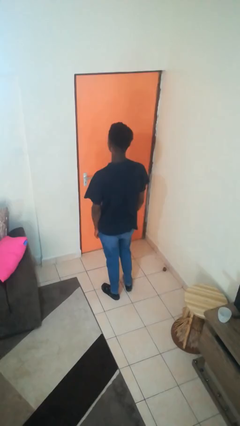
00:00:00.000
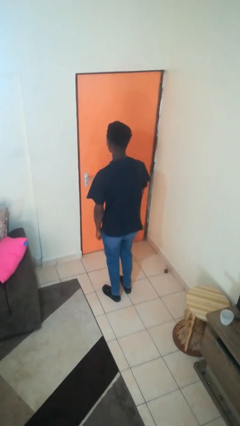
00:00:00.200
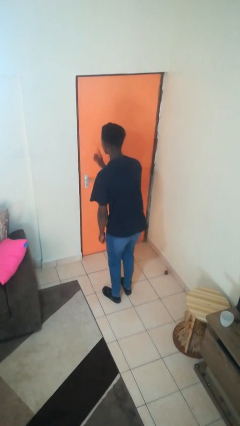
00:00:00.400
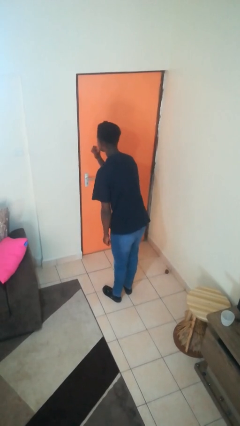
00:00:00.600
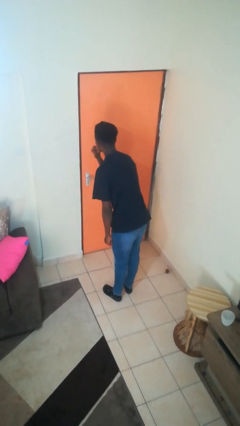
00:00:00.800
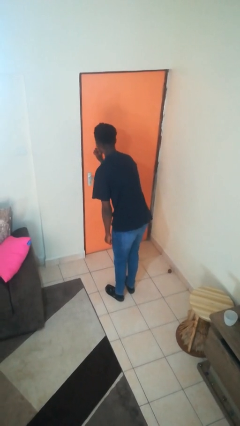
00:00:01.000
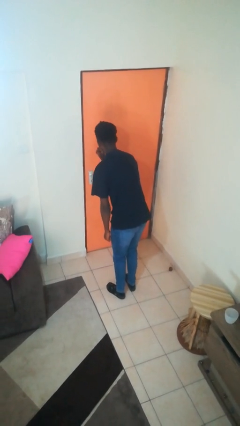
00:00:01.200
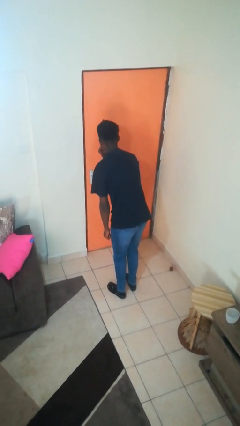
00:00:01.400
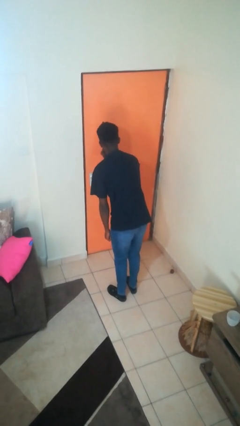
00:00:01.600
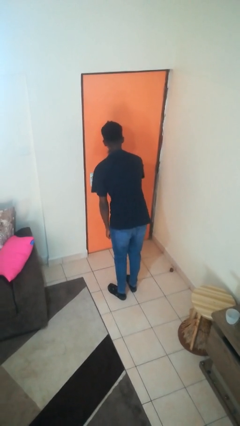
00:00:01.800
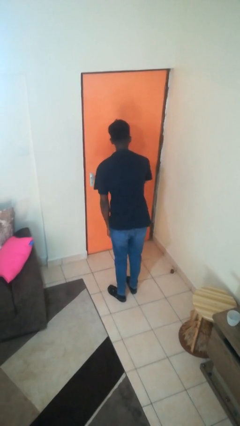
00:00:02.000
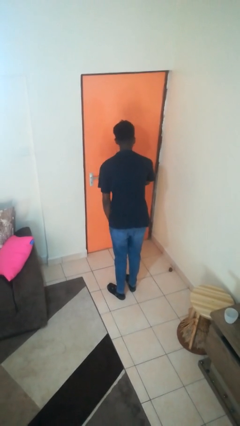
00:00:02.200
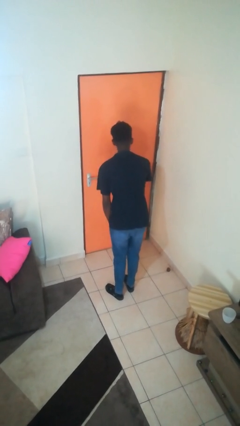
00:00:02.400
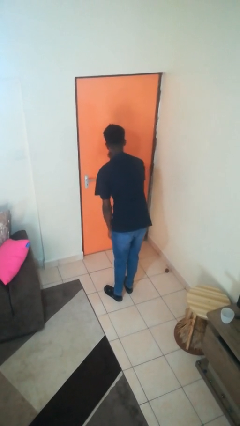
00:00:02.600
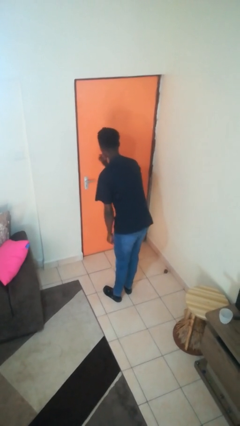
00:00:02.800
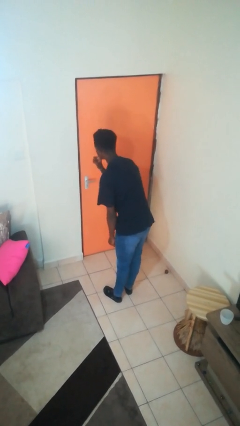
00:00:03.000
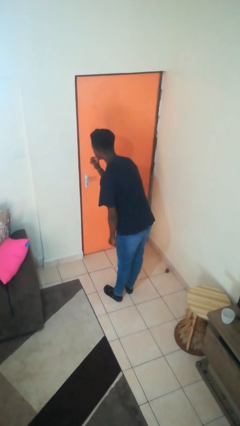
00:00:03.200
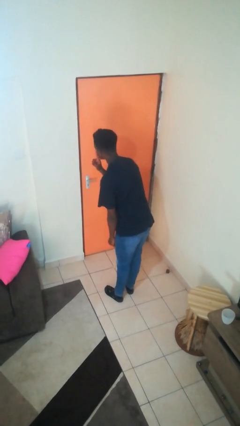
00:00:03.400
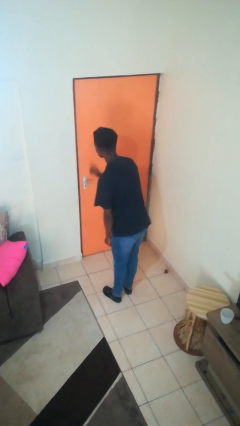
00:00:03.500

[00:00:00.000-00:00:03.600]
person gestures be quiet

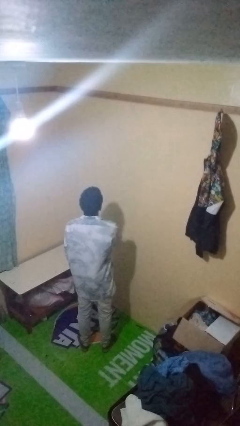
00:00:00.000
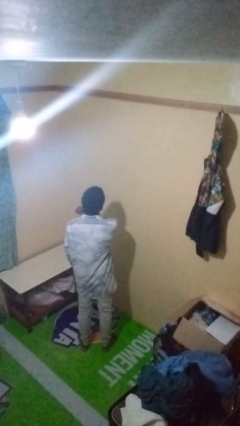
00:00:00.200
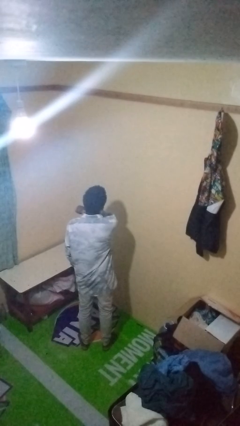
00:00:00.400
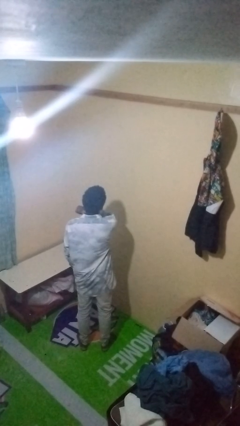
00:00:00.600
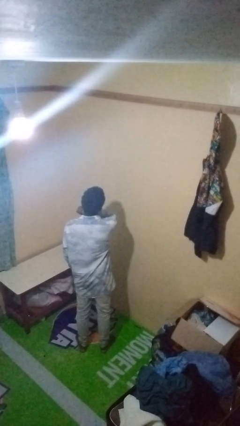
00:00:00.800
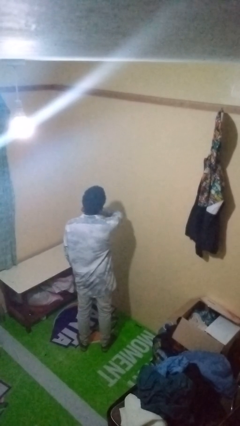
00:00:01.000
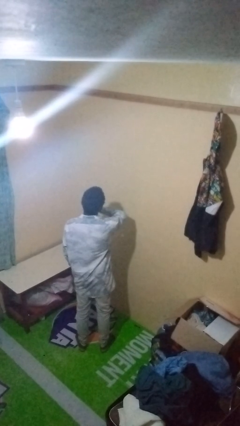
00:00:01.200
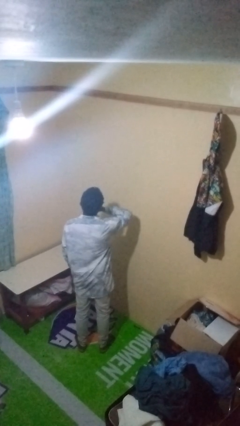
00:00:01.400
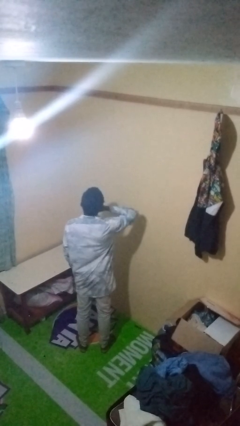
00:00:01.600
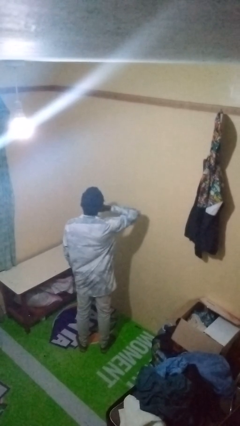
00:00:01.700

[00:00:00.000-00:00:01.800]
person gestures cut

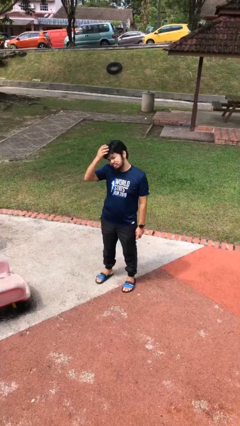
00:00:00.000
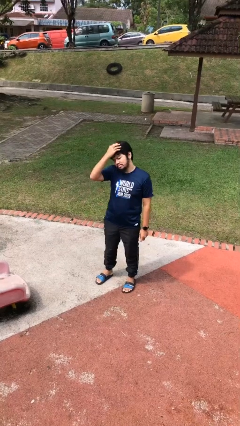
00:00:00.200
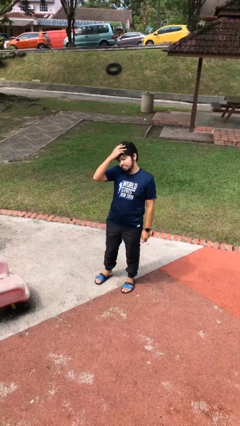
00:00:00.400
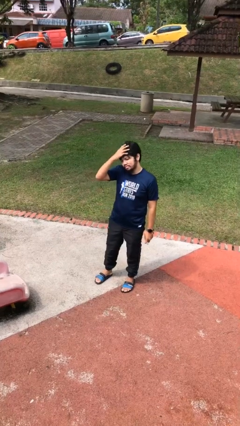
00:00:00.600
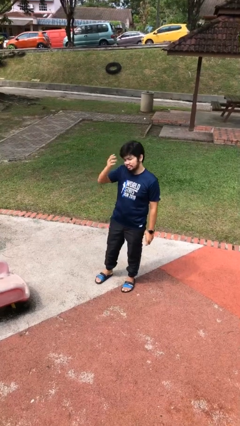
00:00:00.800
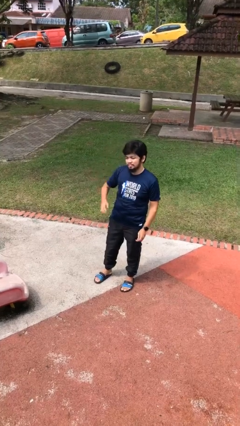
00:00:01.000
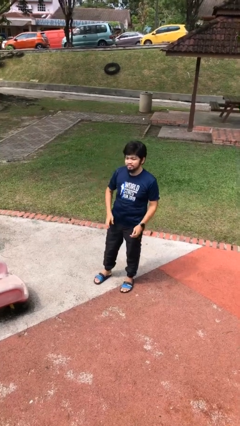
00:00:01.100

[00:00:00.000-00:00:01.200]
person pats head

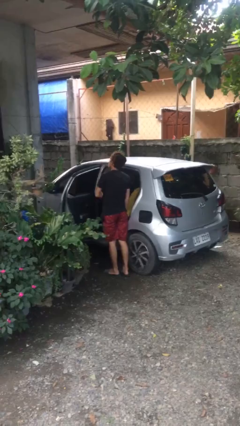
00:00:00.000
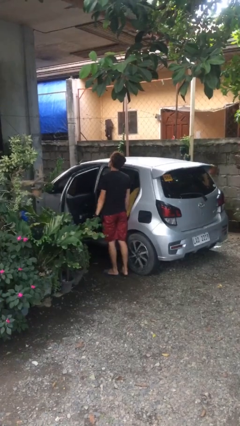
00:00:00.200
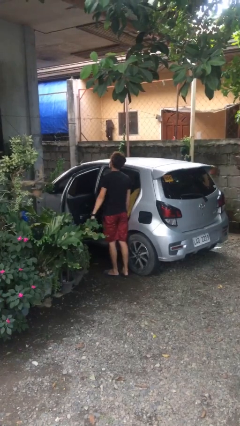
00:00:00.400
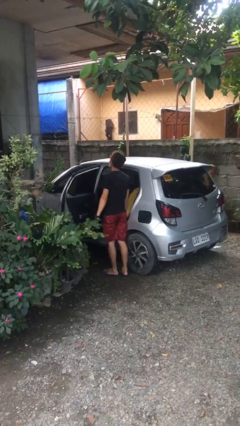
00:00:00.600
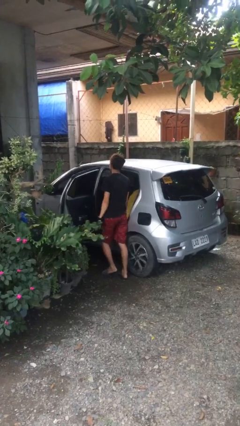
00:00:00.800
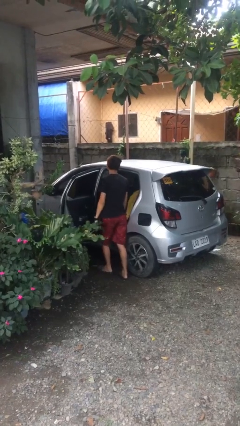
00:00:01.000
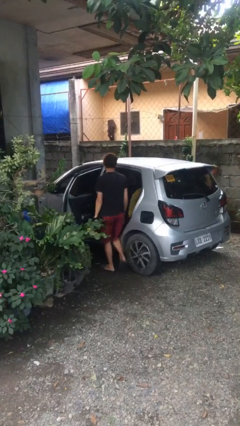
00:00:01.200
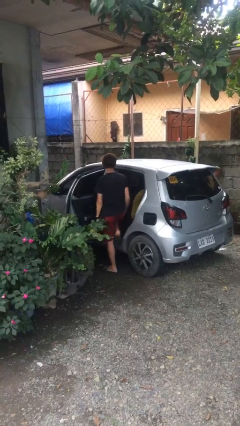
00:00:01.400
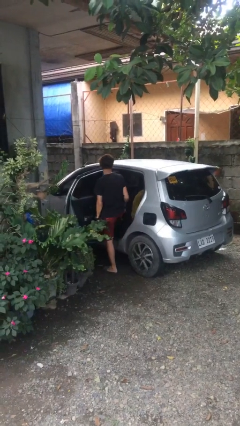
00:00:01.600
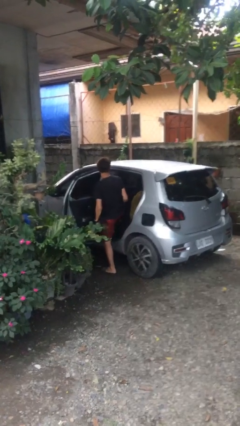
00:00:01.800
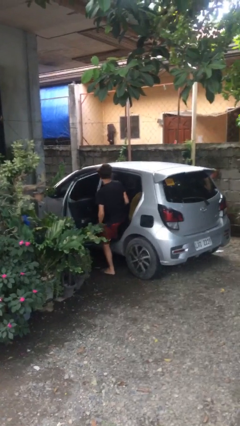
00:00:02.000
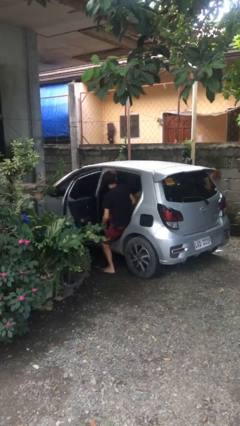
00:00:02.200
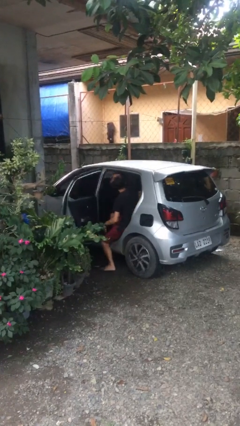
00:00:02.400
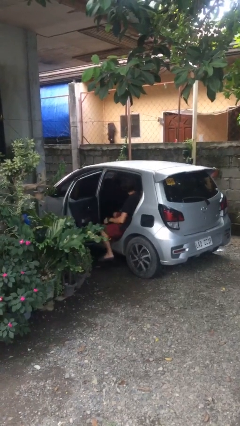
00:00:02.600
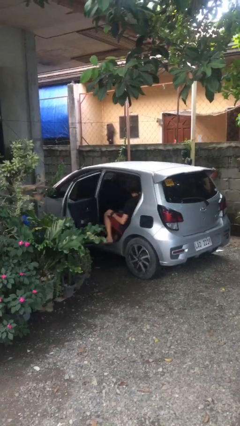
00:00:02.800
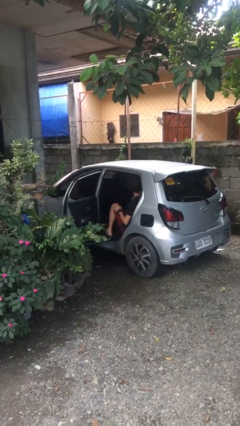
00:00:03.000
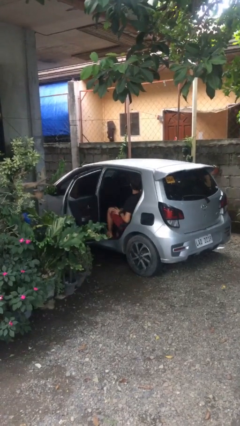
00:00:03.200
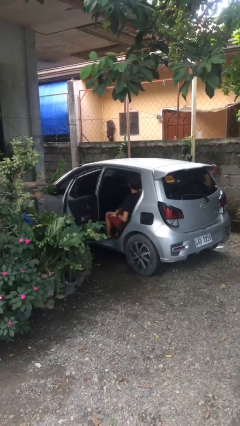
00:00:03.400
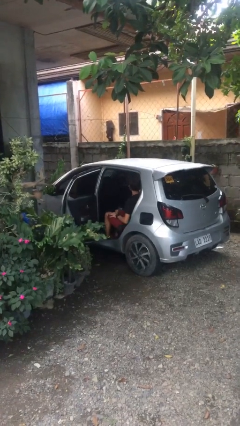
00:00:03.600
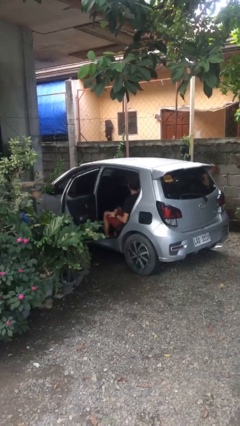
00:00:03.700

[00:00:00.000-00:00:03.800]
person enters car

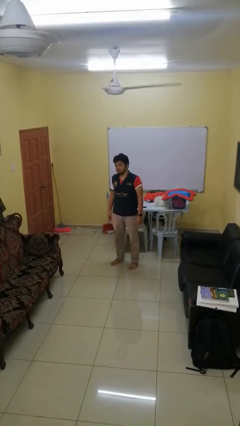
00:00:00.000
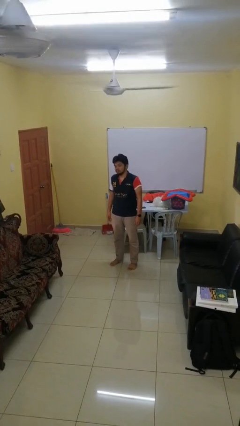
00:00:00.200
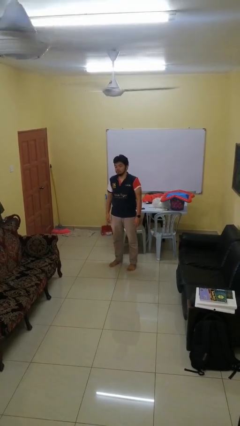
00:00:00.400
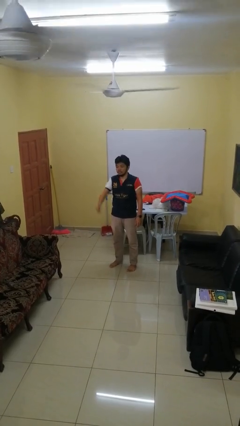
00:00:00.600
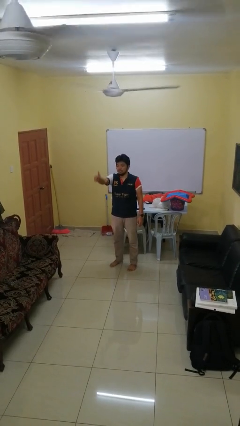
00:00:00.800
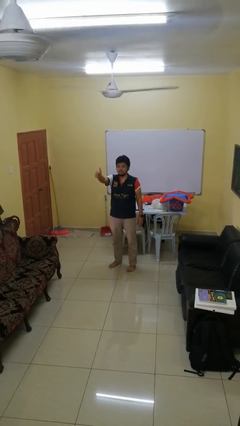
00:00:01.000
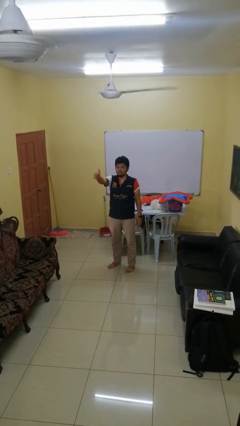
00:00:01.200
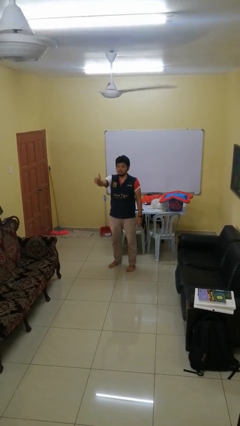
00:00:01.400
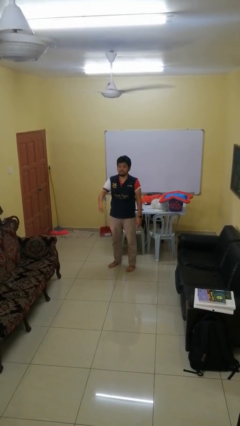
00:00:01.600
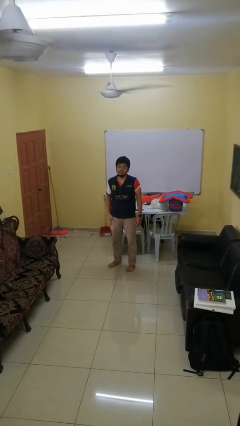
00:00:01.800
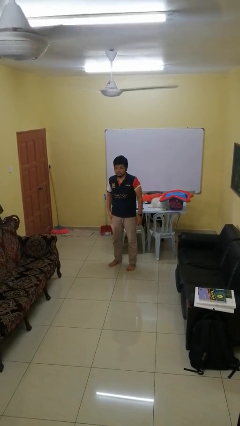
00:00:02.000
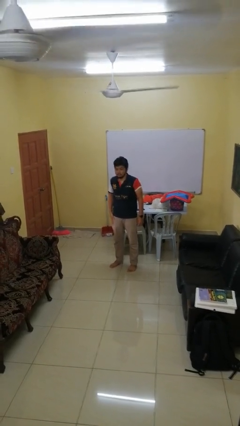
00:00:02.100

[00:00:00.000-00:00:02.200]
person gestures thumbs up

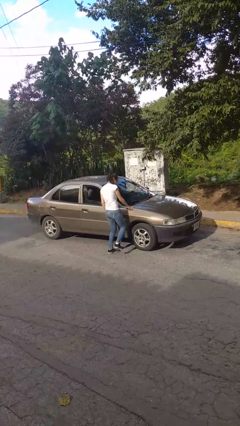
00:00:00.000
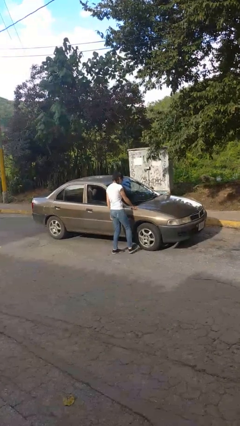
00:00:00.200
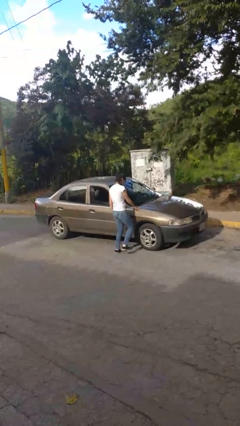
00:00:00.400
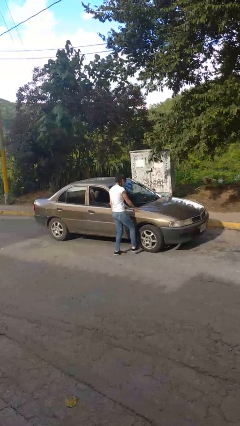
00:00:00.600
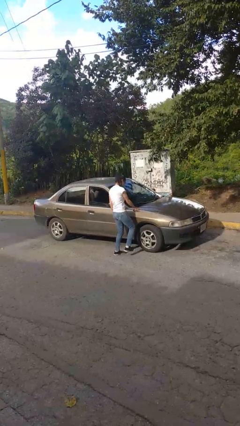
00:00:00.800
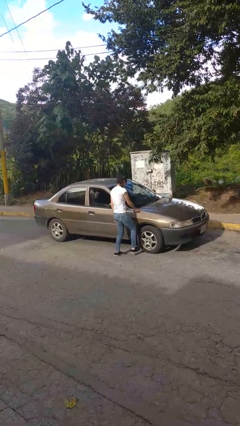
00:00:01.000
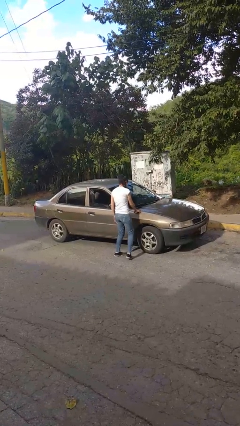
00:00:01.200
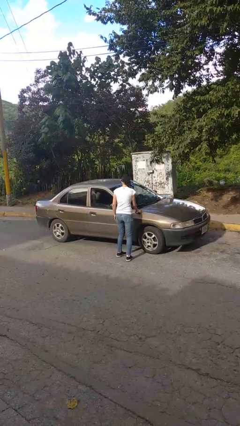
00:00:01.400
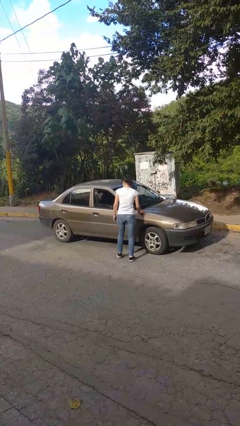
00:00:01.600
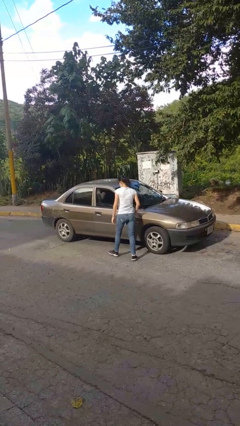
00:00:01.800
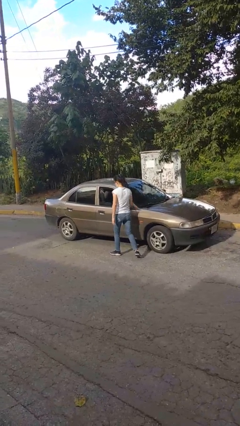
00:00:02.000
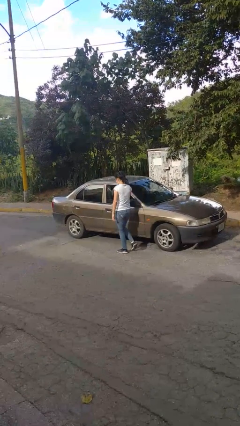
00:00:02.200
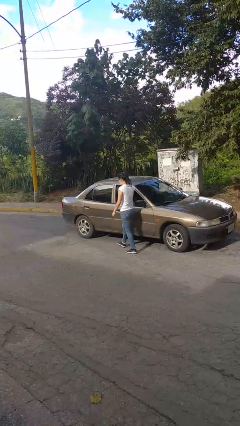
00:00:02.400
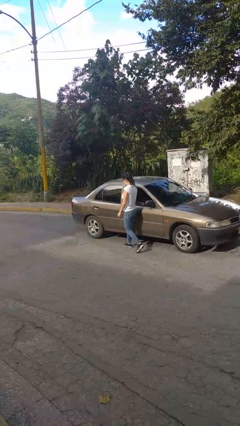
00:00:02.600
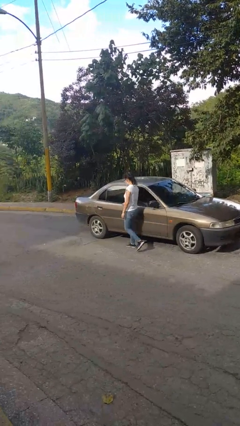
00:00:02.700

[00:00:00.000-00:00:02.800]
person kicks car tires

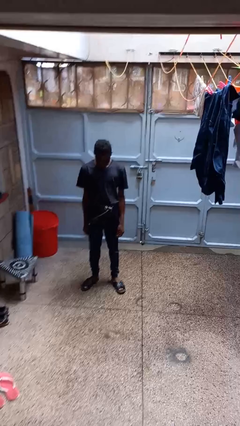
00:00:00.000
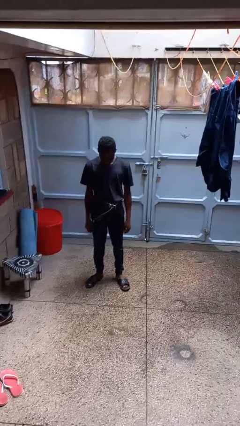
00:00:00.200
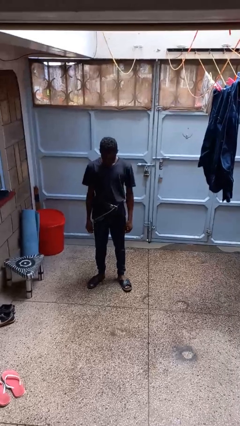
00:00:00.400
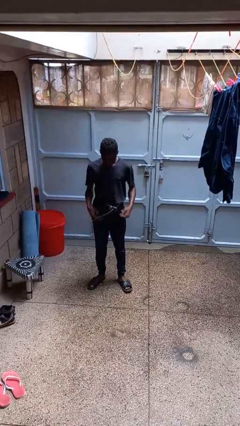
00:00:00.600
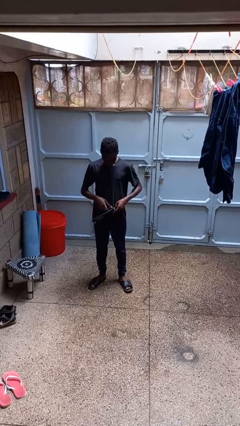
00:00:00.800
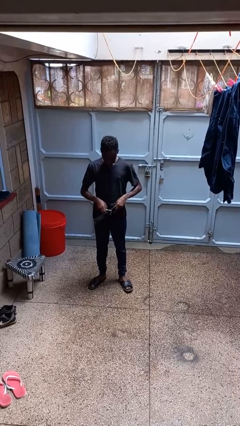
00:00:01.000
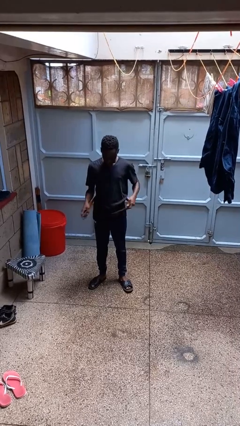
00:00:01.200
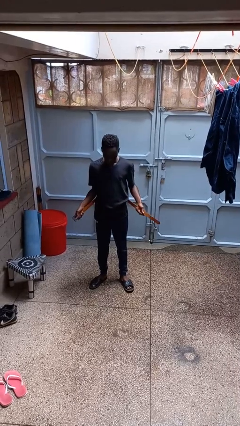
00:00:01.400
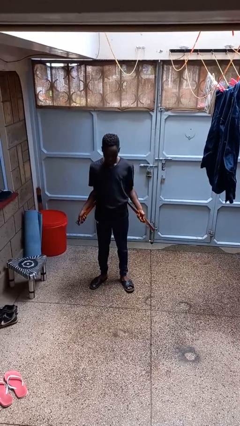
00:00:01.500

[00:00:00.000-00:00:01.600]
person takes off belt

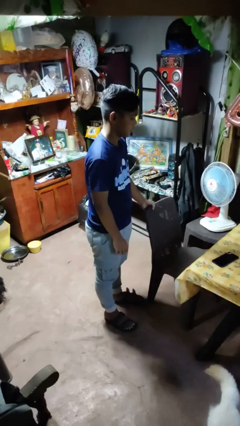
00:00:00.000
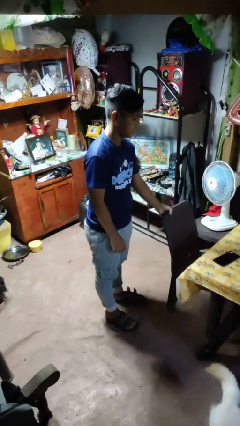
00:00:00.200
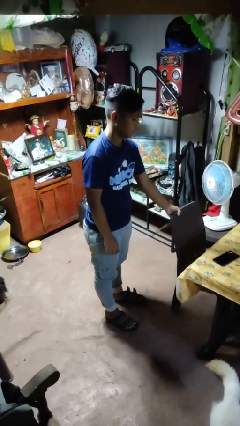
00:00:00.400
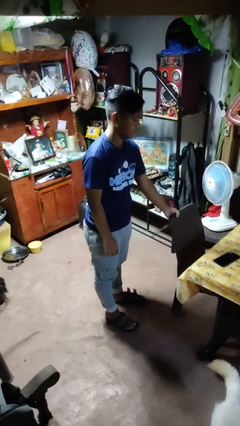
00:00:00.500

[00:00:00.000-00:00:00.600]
person pushes in chair
